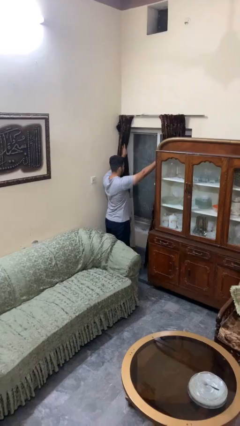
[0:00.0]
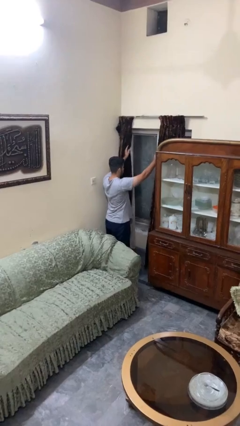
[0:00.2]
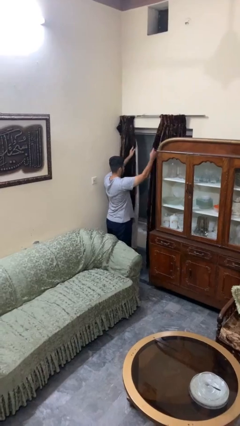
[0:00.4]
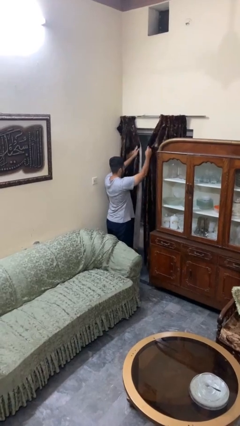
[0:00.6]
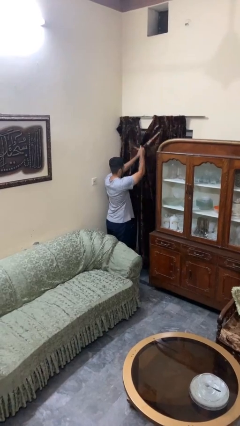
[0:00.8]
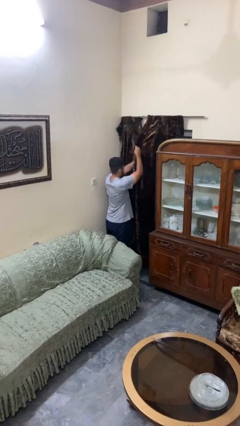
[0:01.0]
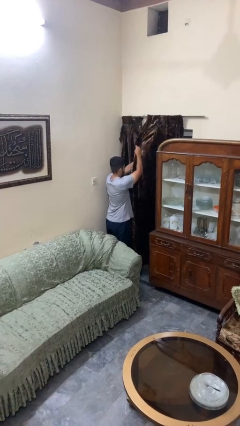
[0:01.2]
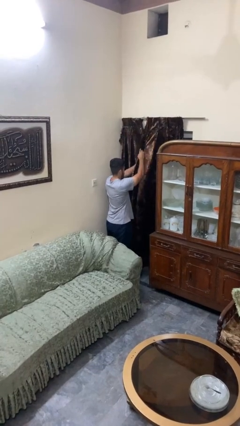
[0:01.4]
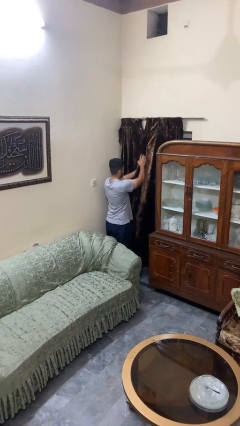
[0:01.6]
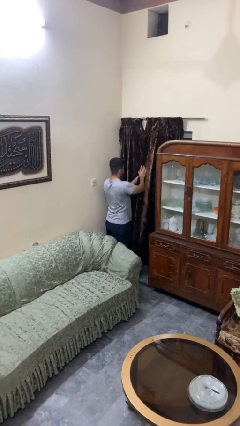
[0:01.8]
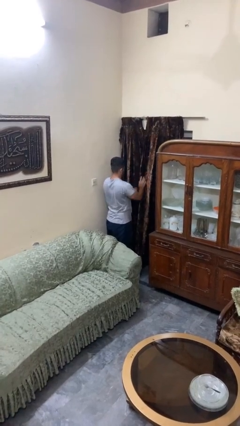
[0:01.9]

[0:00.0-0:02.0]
person closes curtains

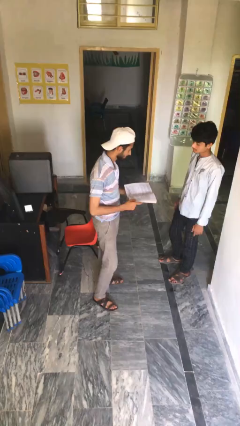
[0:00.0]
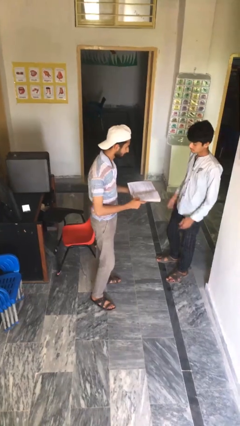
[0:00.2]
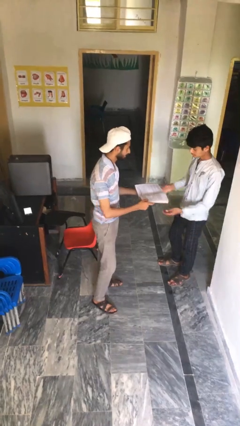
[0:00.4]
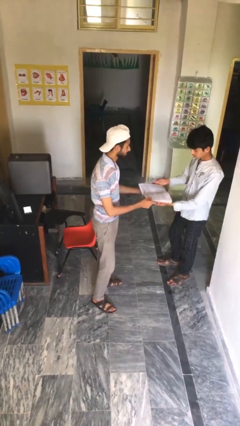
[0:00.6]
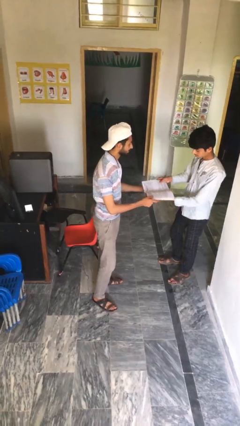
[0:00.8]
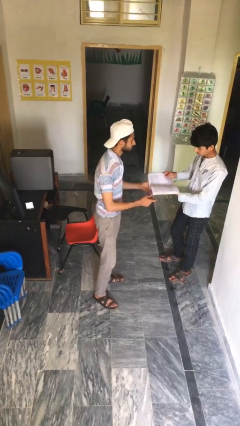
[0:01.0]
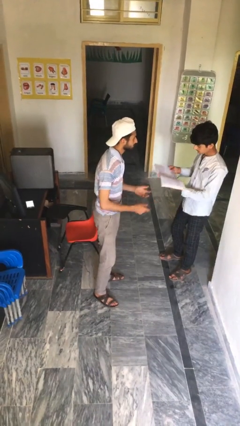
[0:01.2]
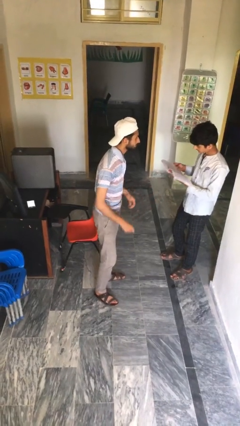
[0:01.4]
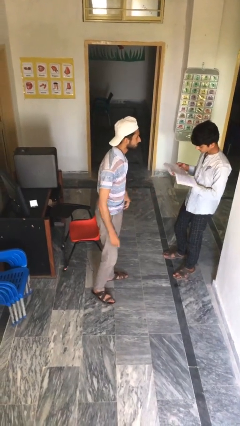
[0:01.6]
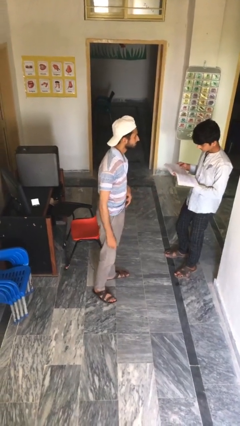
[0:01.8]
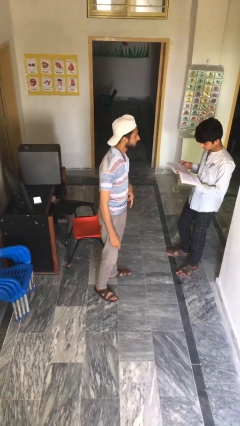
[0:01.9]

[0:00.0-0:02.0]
person transfers object to person

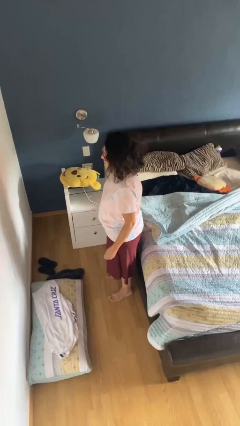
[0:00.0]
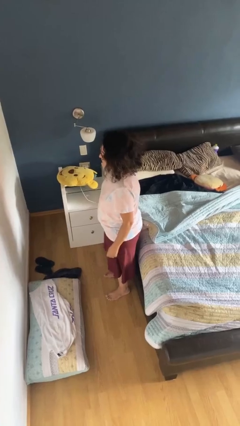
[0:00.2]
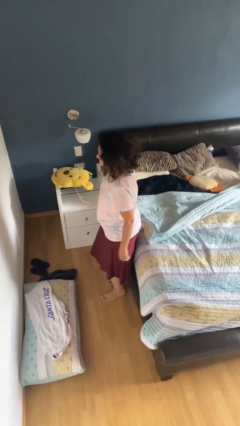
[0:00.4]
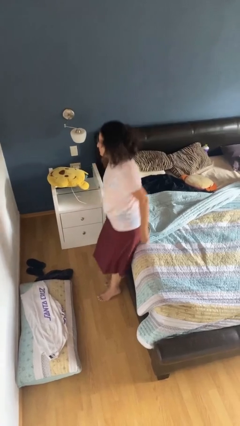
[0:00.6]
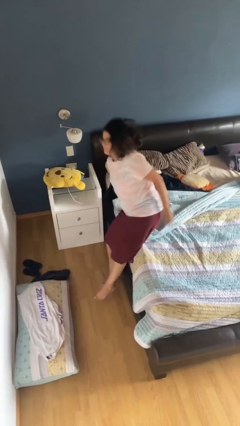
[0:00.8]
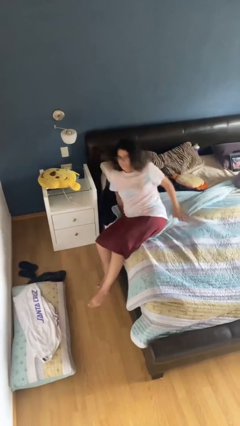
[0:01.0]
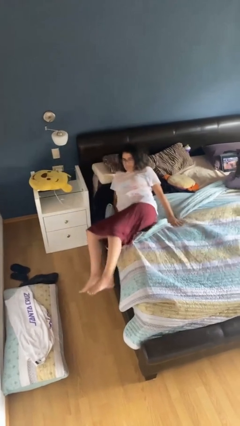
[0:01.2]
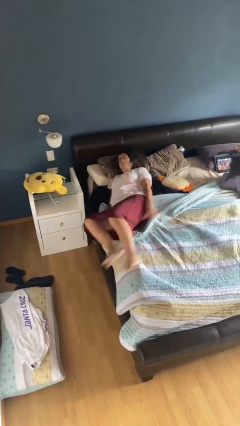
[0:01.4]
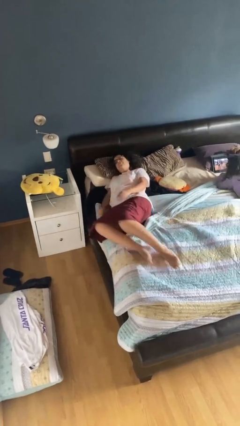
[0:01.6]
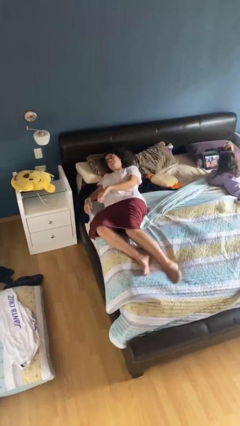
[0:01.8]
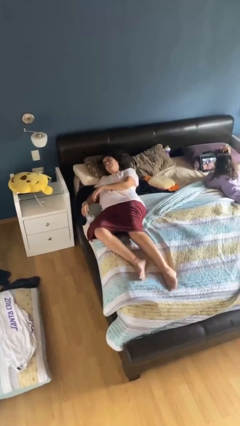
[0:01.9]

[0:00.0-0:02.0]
person lies down on bed

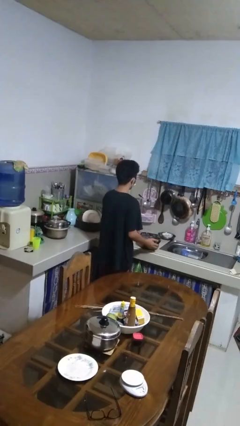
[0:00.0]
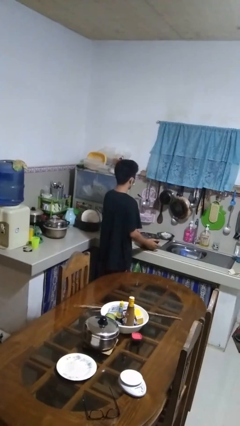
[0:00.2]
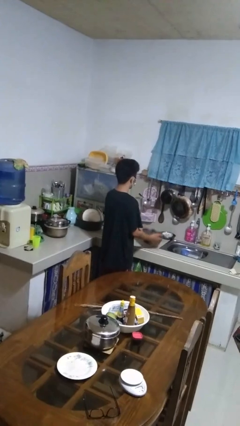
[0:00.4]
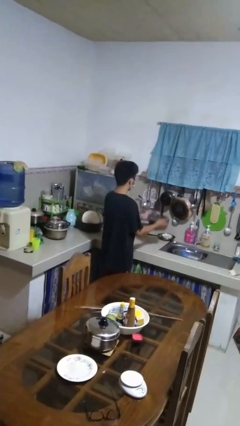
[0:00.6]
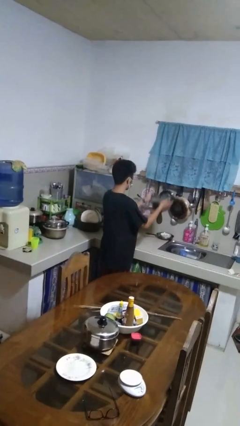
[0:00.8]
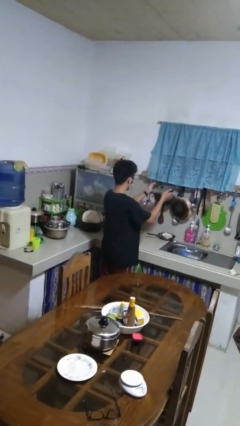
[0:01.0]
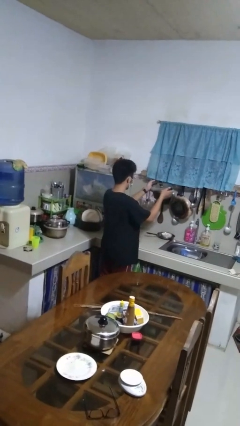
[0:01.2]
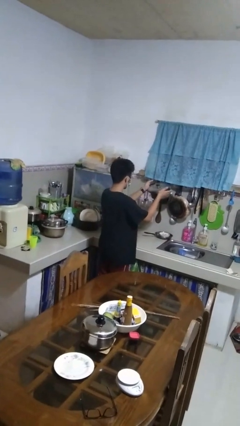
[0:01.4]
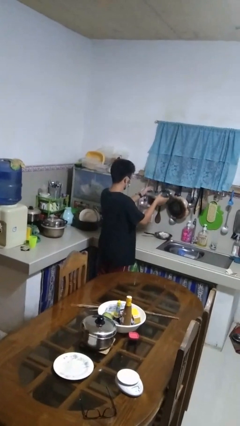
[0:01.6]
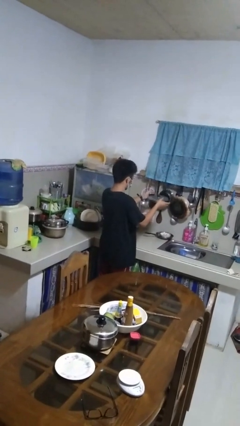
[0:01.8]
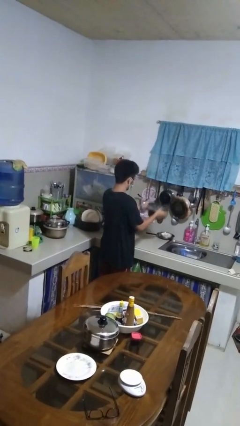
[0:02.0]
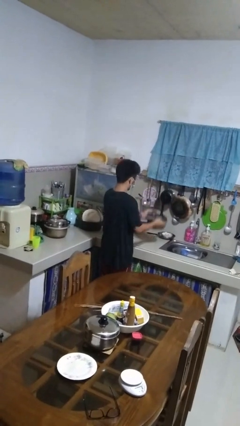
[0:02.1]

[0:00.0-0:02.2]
person picks up object from countertop

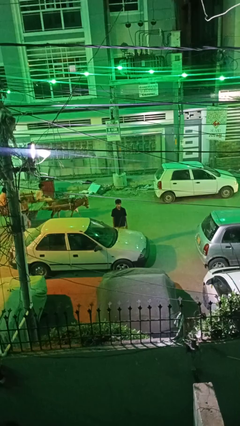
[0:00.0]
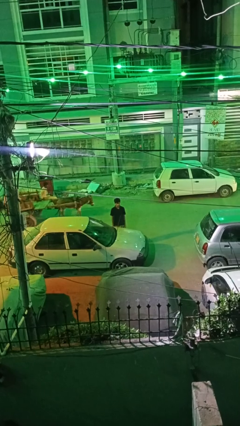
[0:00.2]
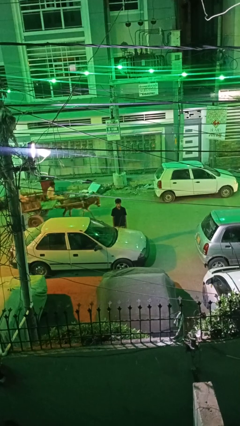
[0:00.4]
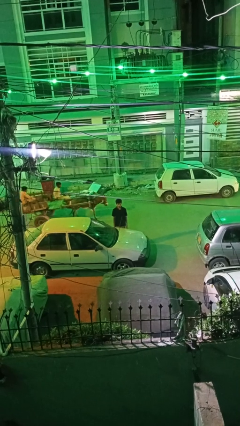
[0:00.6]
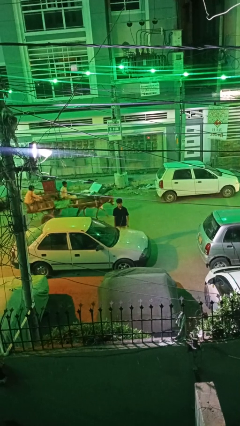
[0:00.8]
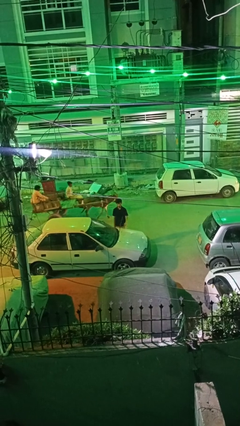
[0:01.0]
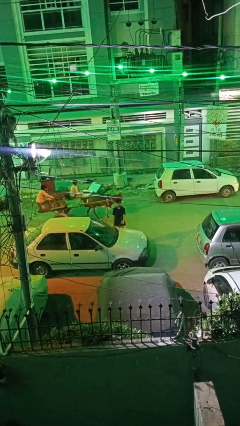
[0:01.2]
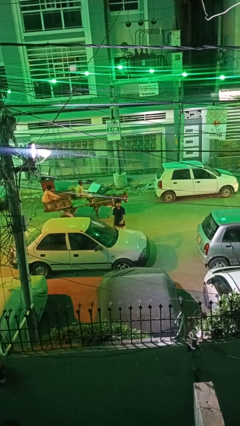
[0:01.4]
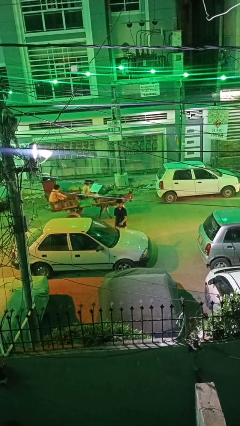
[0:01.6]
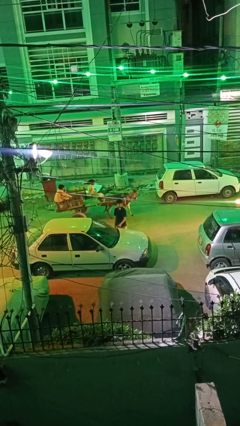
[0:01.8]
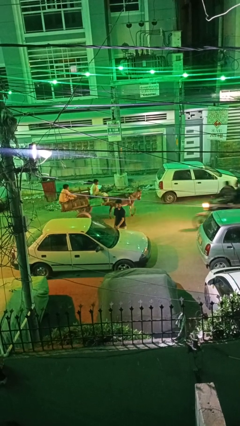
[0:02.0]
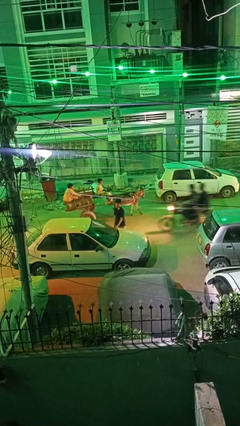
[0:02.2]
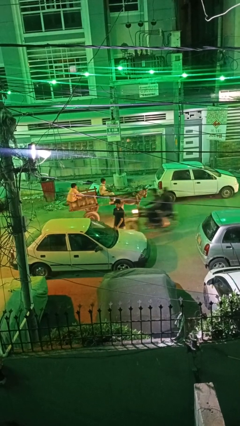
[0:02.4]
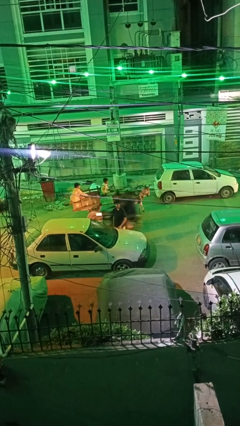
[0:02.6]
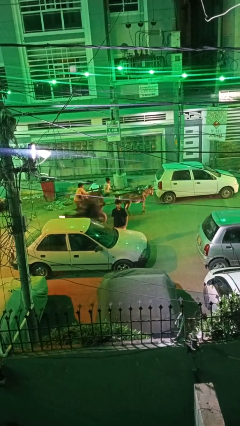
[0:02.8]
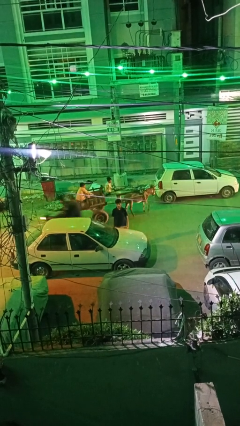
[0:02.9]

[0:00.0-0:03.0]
person flips down car wipers

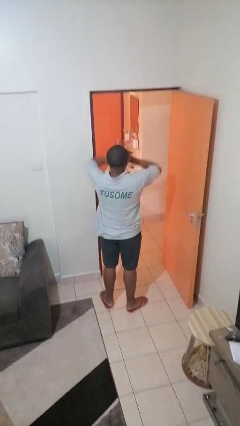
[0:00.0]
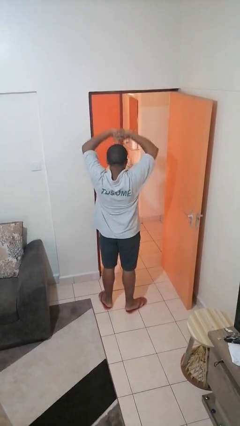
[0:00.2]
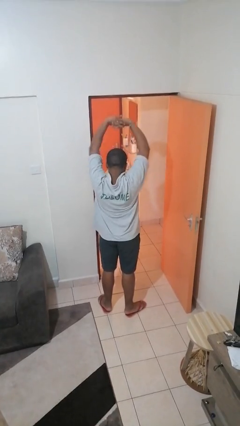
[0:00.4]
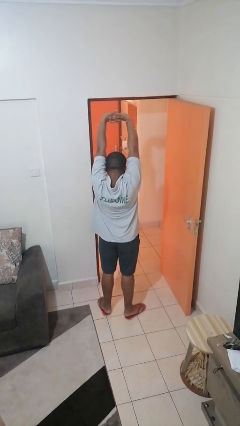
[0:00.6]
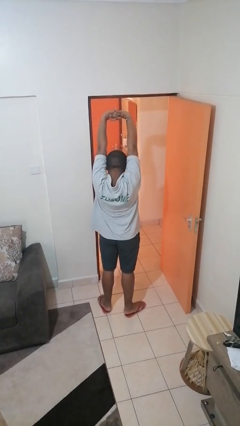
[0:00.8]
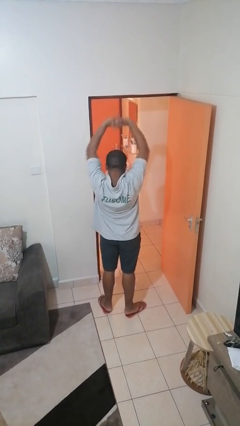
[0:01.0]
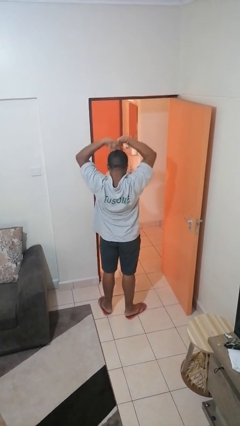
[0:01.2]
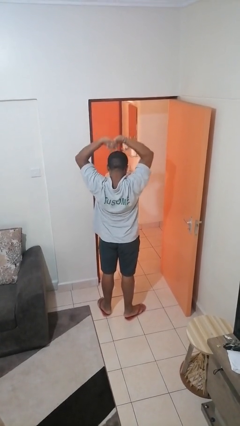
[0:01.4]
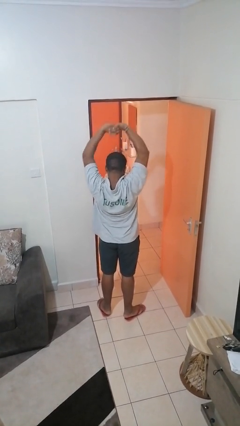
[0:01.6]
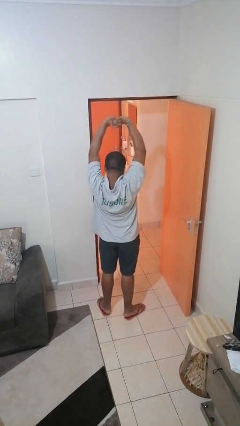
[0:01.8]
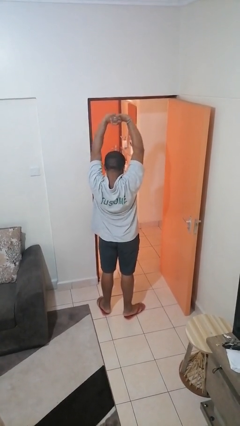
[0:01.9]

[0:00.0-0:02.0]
person stretches arms over head

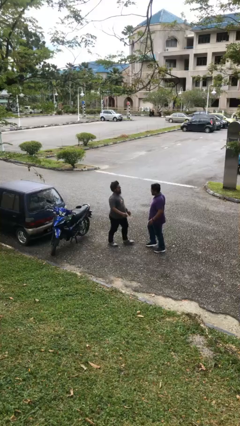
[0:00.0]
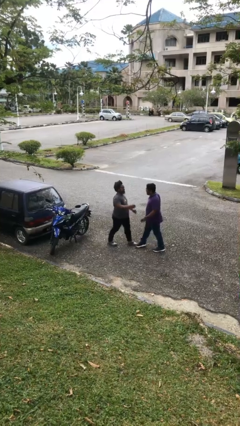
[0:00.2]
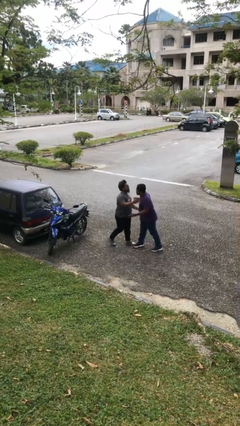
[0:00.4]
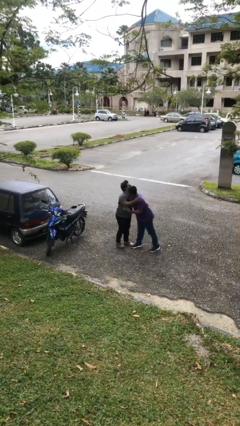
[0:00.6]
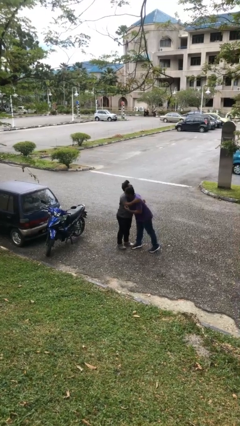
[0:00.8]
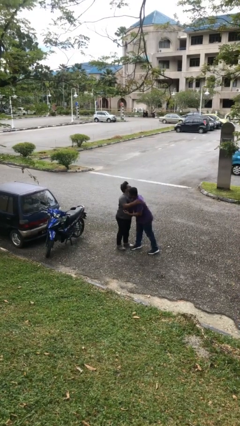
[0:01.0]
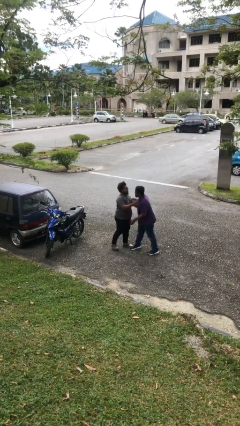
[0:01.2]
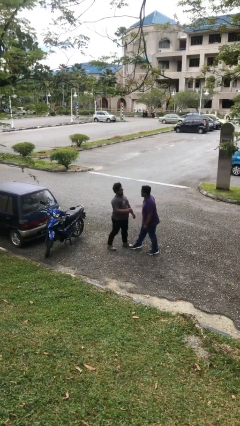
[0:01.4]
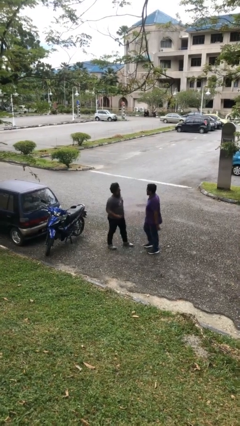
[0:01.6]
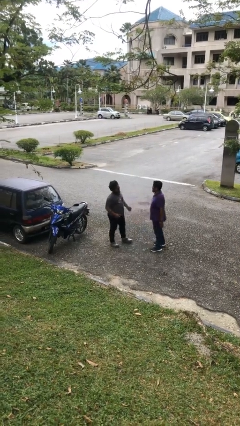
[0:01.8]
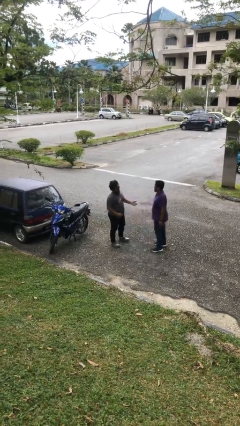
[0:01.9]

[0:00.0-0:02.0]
person embraces person

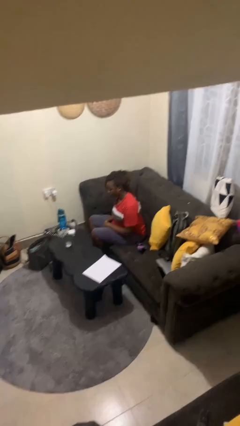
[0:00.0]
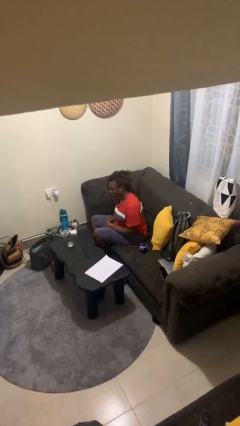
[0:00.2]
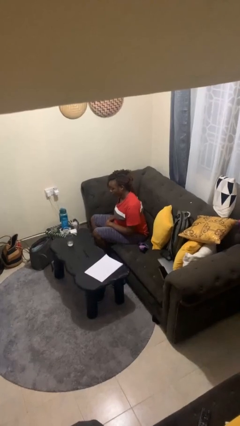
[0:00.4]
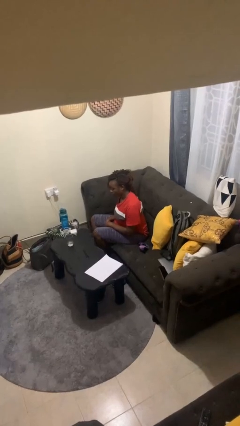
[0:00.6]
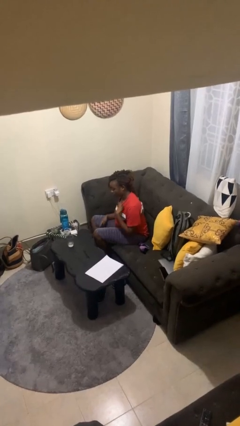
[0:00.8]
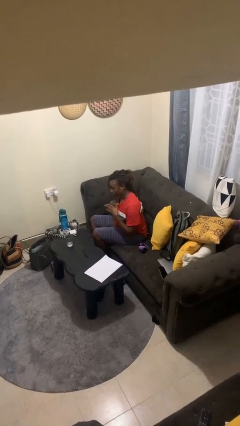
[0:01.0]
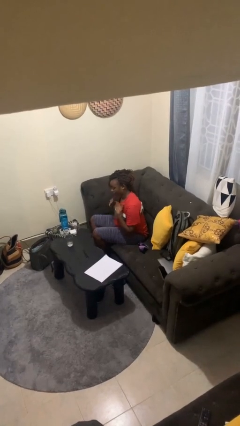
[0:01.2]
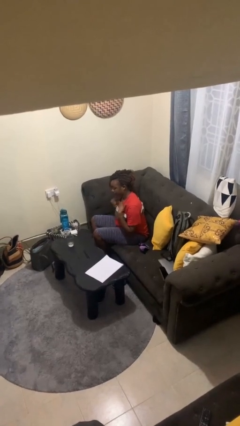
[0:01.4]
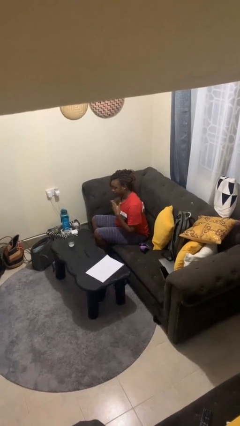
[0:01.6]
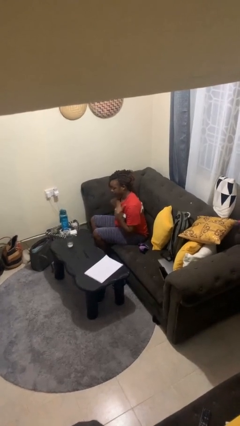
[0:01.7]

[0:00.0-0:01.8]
person drums on chest
